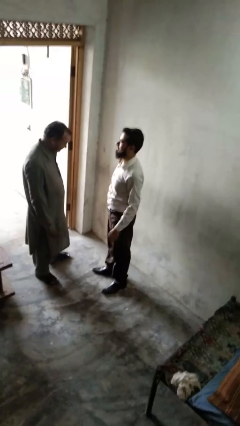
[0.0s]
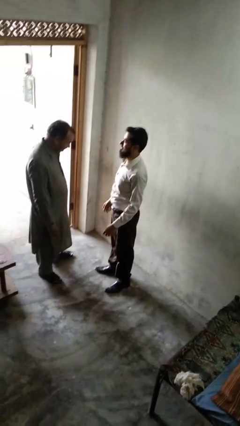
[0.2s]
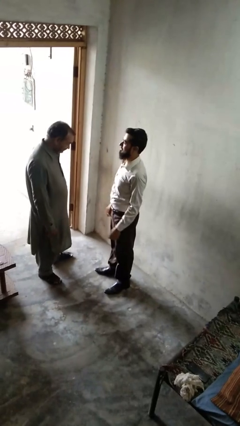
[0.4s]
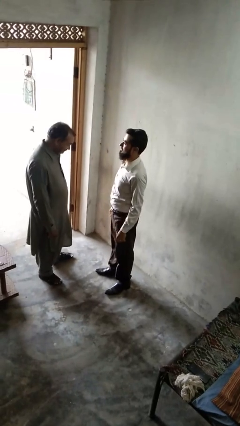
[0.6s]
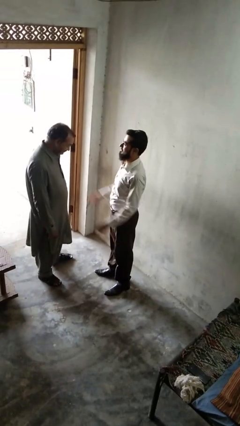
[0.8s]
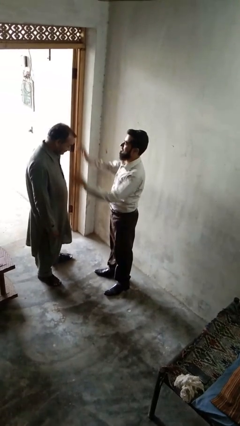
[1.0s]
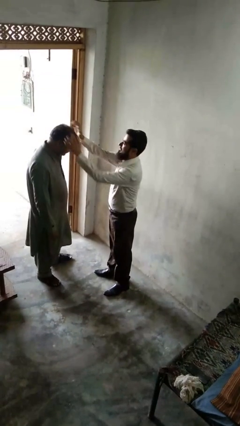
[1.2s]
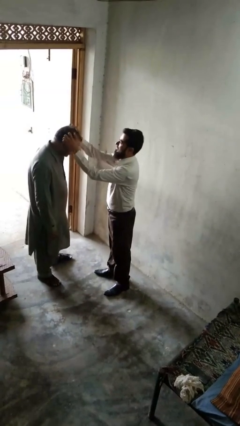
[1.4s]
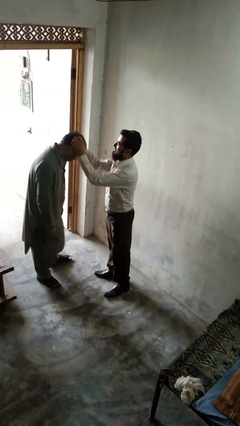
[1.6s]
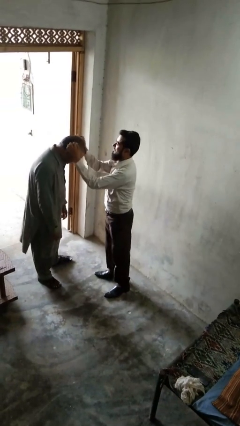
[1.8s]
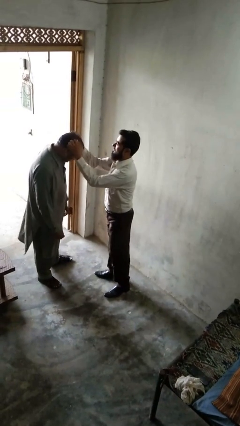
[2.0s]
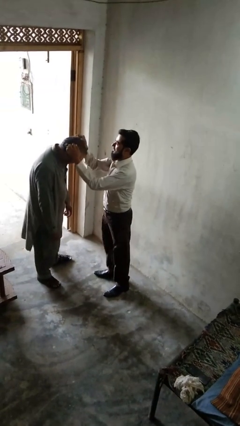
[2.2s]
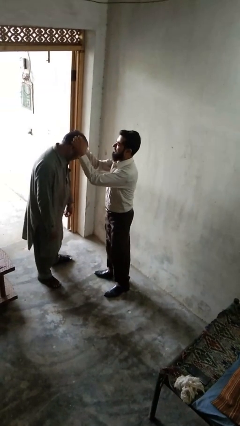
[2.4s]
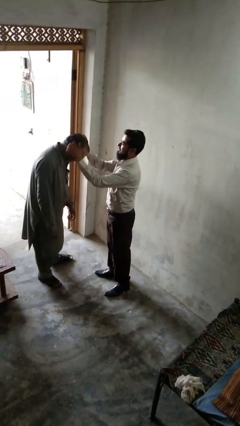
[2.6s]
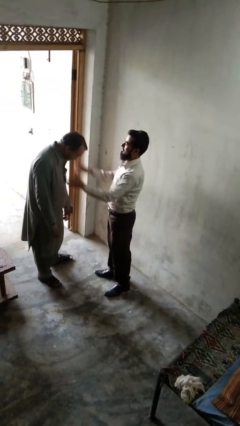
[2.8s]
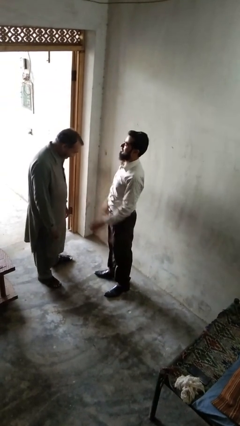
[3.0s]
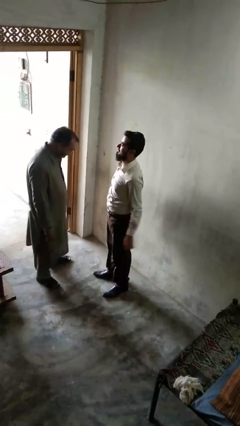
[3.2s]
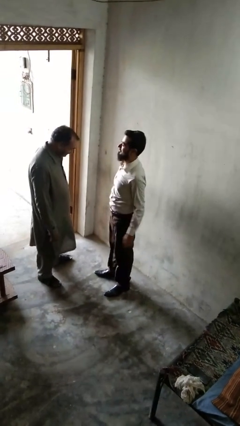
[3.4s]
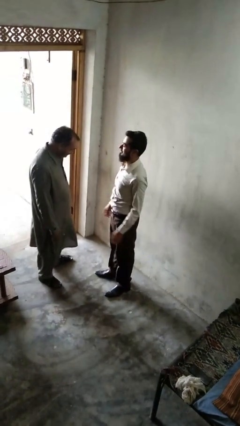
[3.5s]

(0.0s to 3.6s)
person grabs person by hair

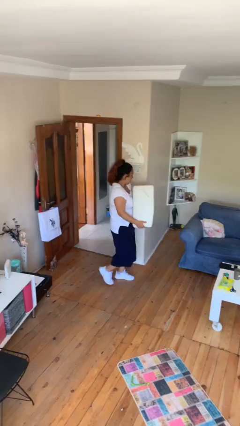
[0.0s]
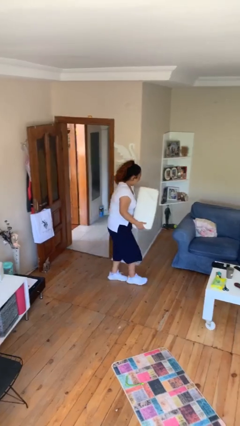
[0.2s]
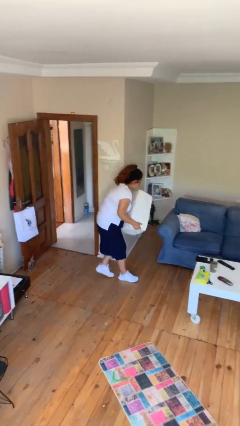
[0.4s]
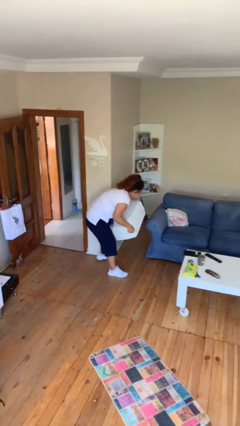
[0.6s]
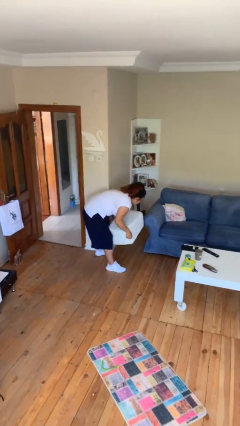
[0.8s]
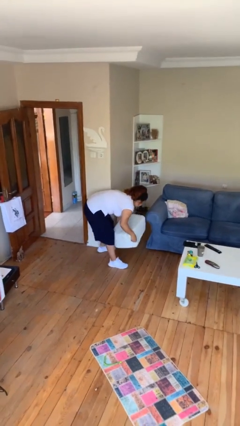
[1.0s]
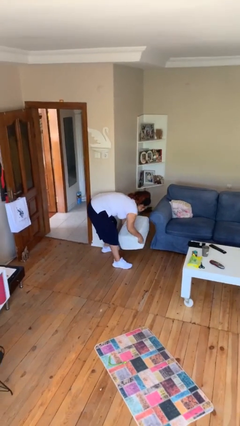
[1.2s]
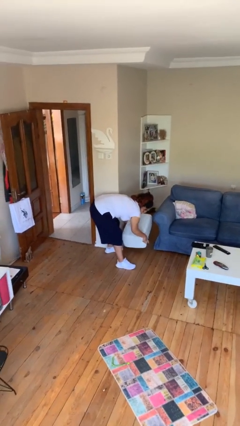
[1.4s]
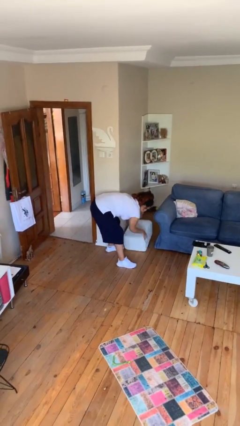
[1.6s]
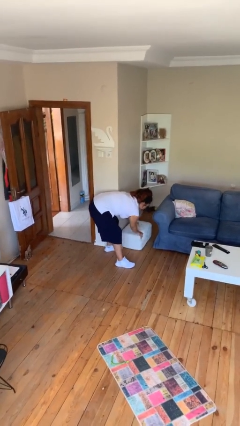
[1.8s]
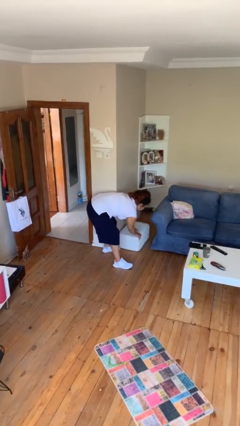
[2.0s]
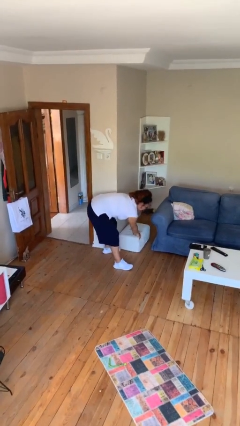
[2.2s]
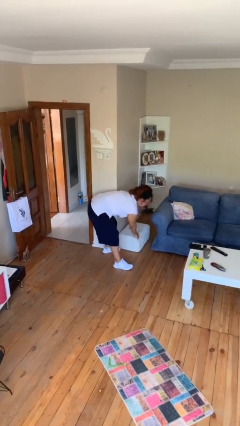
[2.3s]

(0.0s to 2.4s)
person puts down object on floor

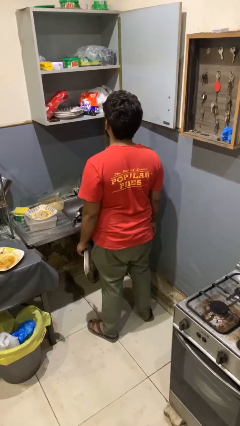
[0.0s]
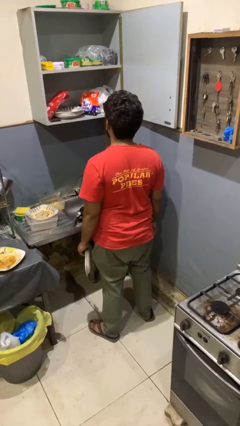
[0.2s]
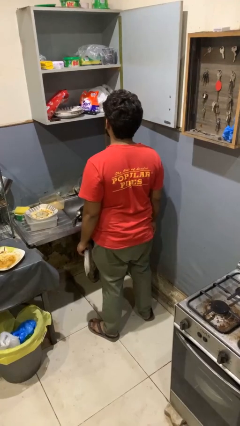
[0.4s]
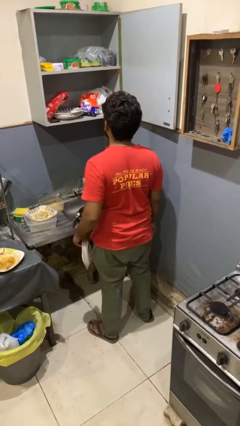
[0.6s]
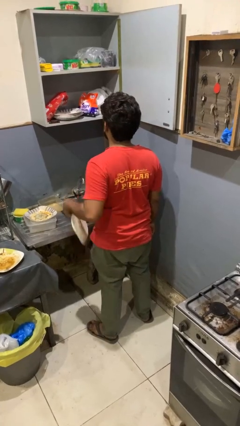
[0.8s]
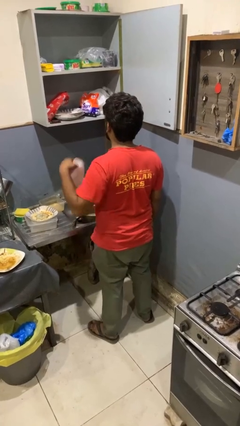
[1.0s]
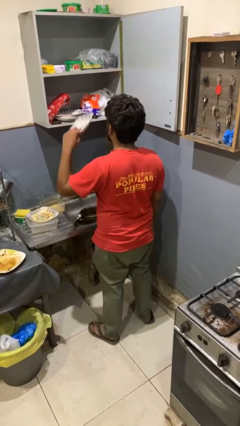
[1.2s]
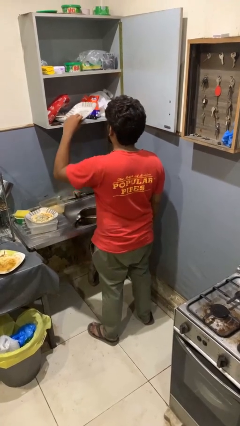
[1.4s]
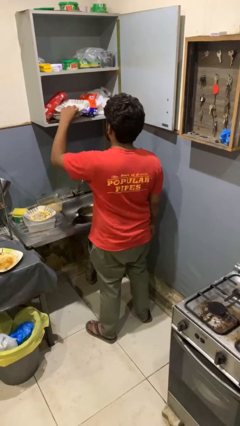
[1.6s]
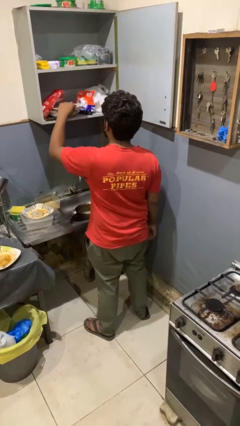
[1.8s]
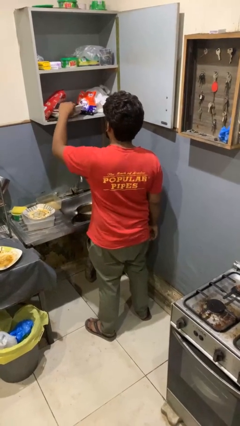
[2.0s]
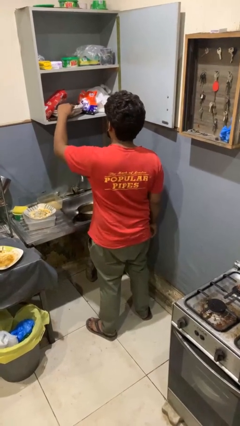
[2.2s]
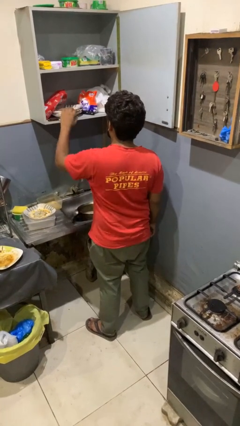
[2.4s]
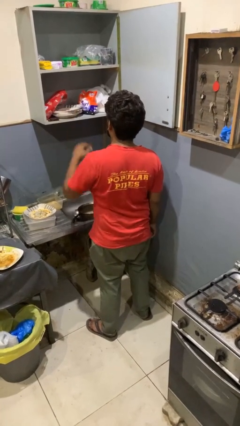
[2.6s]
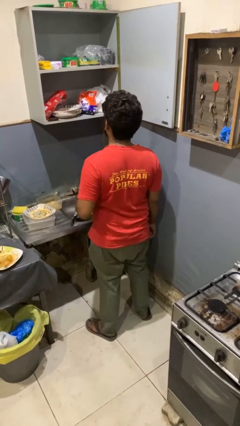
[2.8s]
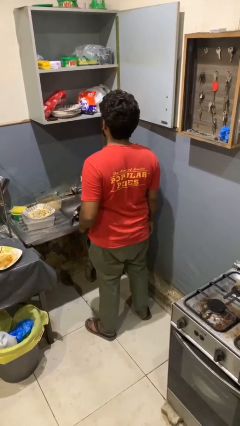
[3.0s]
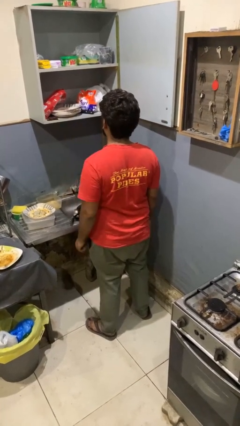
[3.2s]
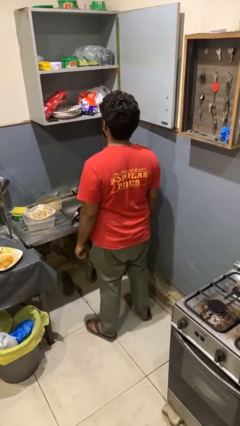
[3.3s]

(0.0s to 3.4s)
person puts object in cabinet

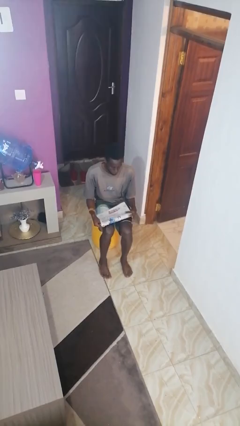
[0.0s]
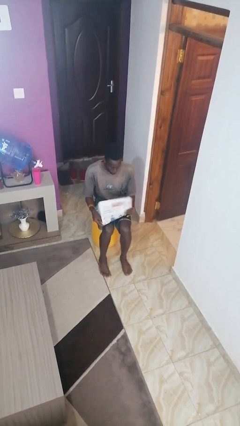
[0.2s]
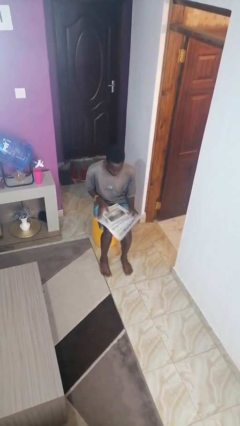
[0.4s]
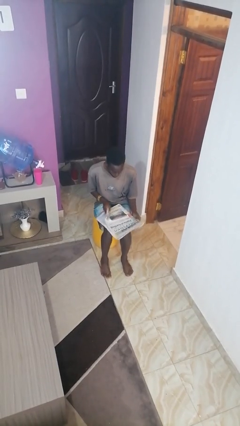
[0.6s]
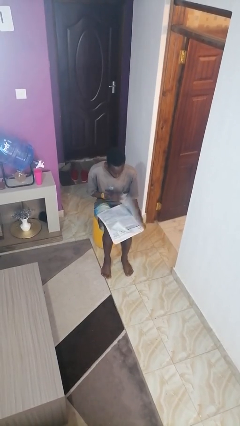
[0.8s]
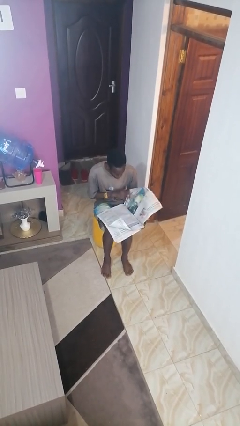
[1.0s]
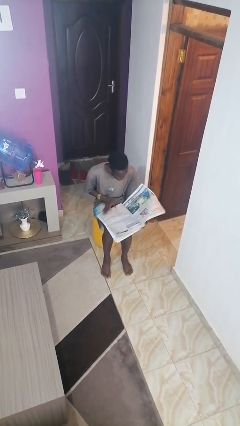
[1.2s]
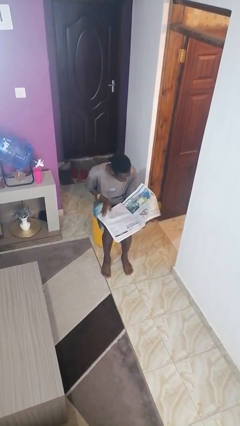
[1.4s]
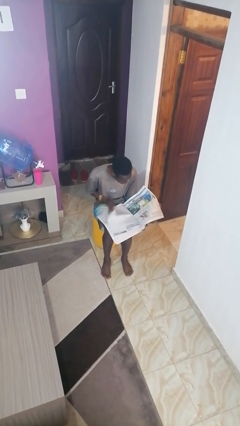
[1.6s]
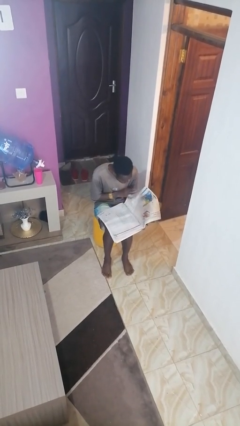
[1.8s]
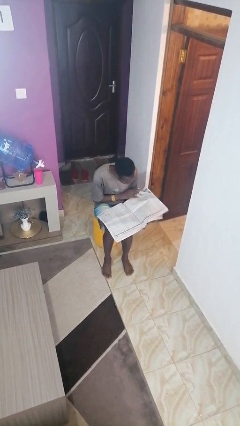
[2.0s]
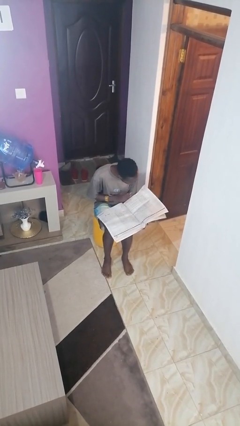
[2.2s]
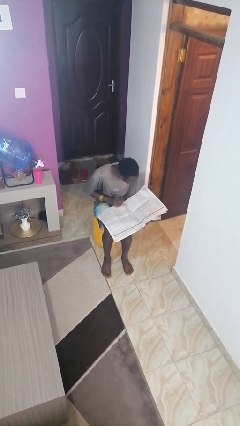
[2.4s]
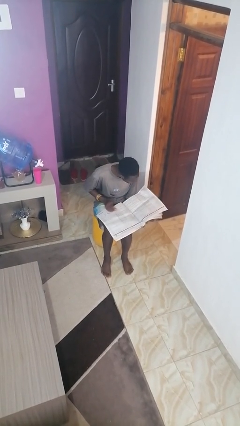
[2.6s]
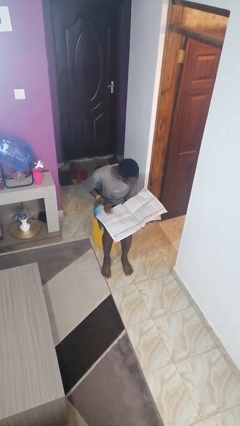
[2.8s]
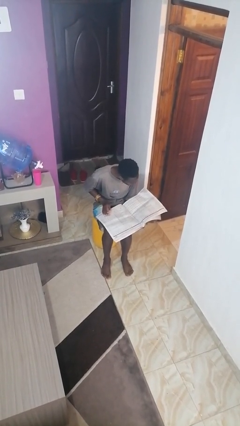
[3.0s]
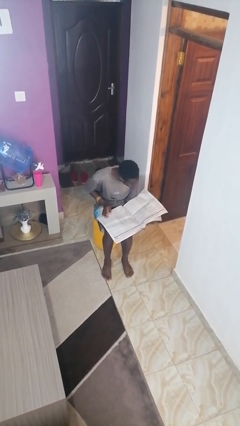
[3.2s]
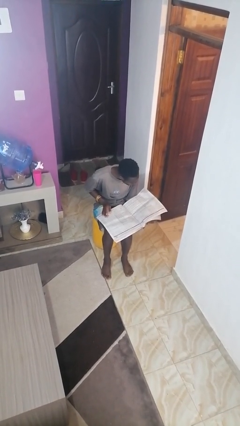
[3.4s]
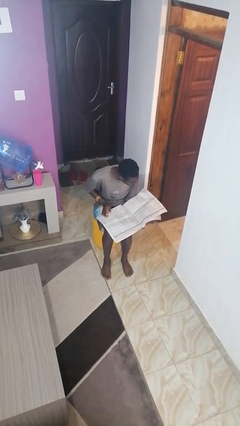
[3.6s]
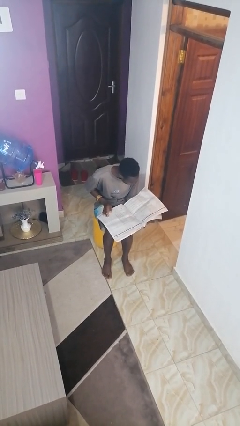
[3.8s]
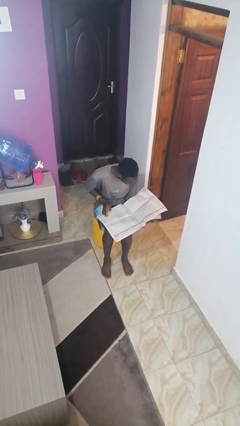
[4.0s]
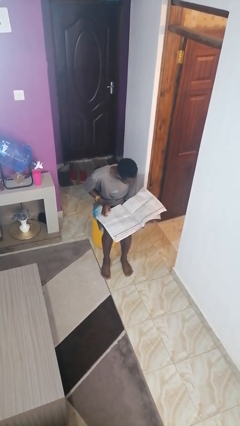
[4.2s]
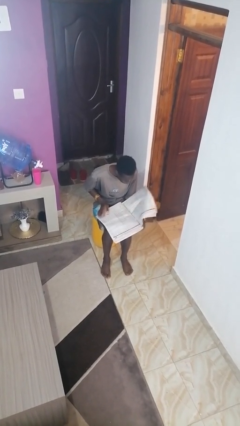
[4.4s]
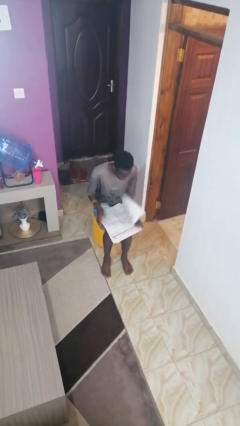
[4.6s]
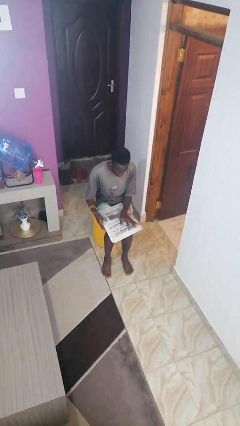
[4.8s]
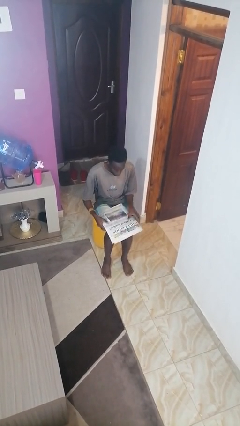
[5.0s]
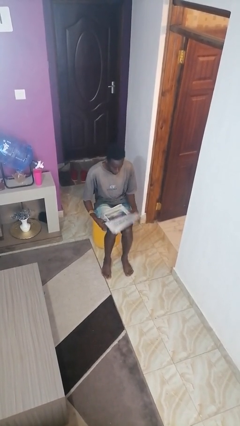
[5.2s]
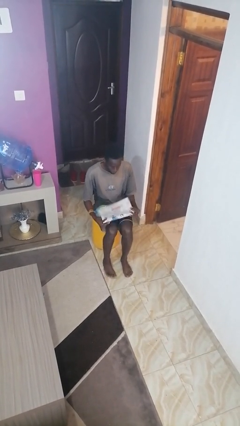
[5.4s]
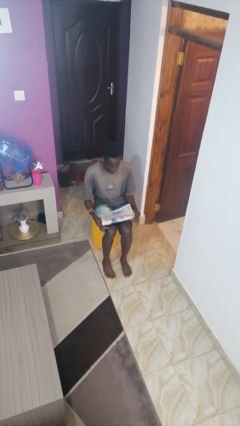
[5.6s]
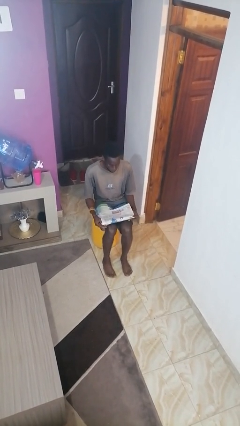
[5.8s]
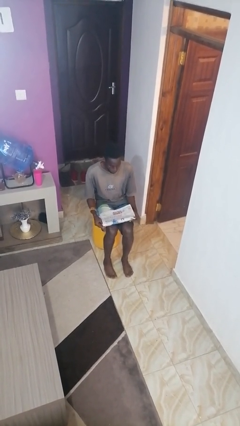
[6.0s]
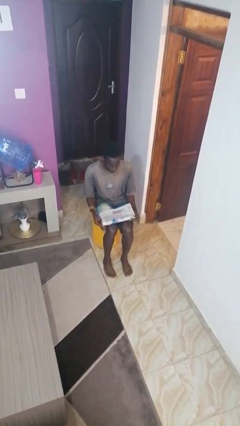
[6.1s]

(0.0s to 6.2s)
person reads newspaper

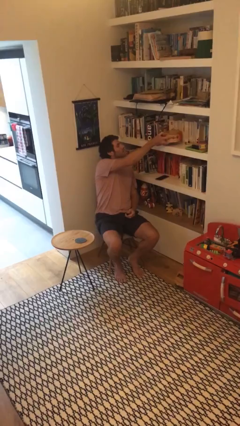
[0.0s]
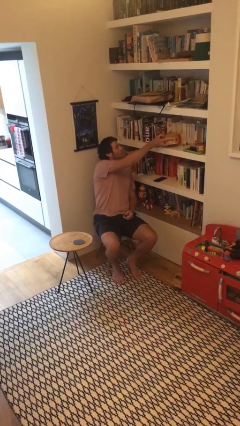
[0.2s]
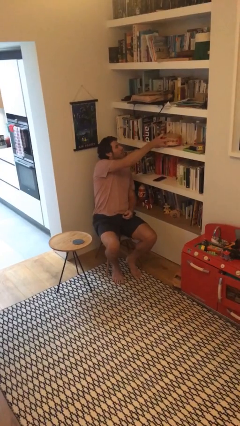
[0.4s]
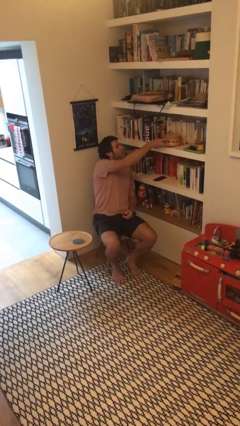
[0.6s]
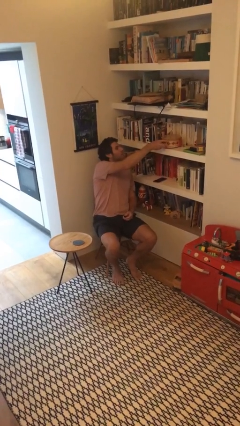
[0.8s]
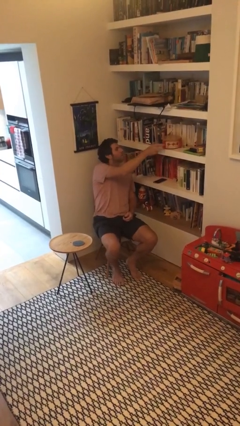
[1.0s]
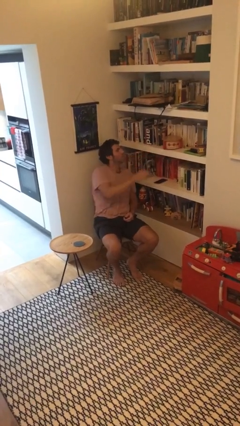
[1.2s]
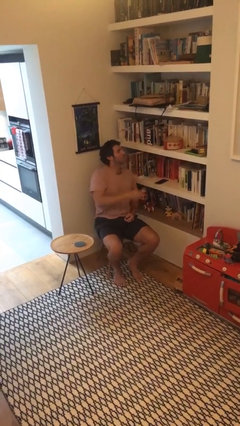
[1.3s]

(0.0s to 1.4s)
person puts down object on shelf

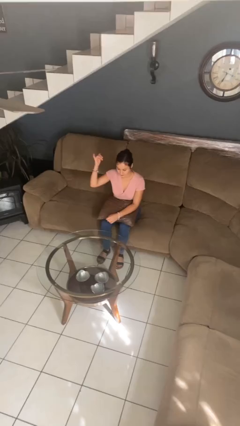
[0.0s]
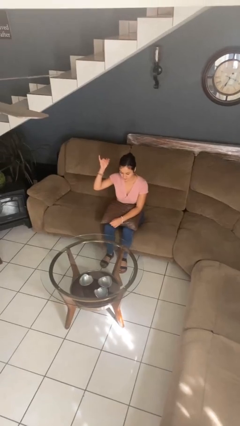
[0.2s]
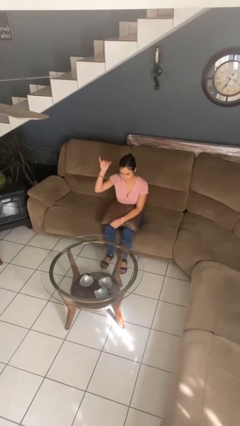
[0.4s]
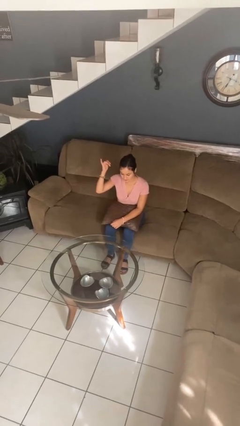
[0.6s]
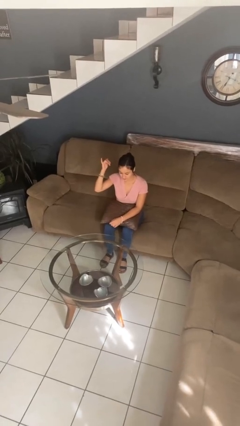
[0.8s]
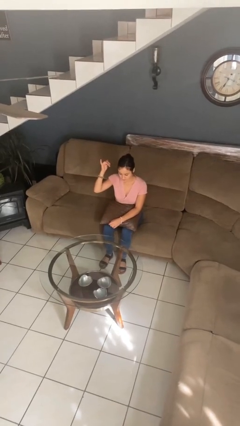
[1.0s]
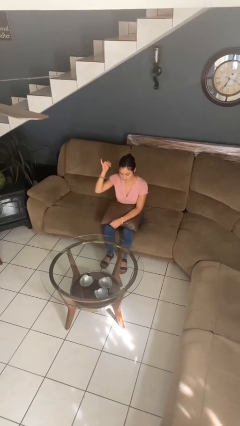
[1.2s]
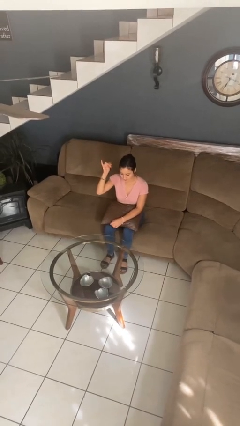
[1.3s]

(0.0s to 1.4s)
person gestures hang loose
